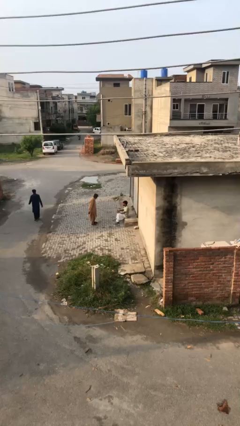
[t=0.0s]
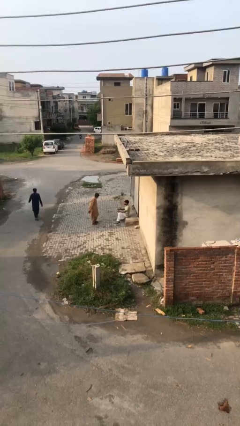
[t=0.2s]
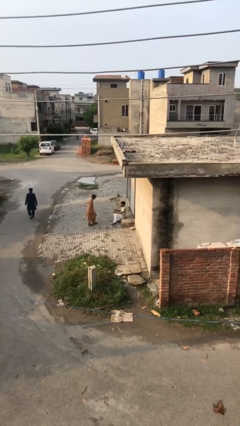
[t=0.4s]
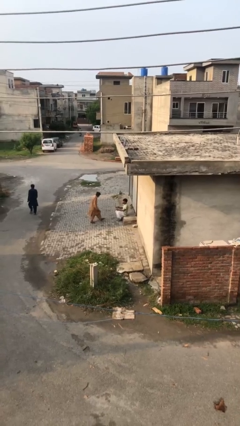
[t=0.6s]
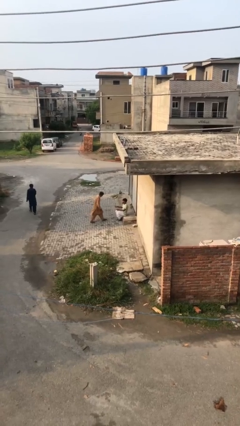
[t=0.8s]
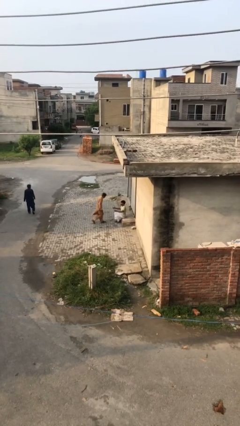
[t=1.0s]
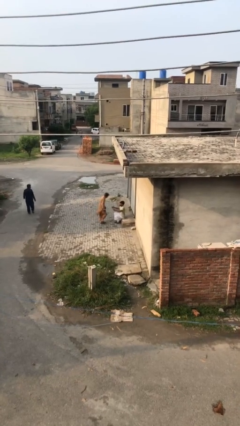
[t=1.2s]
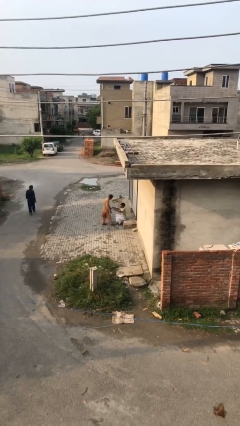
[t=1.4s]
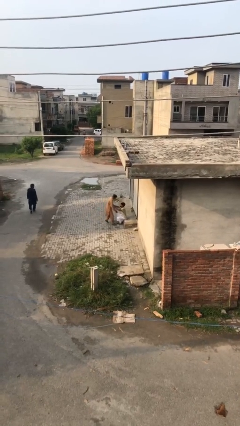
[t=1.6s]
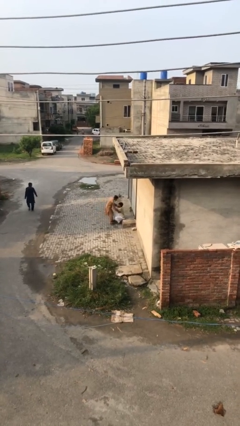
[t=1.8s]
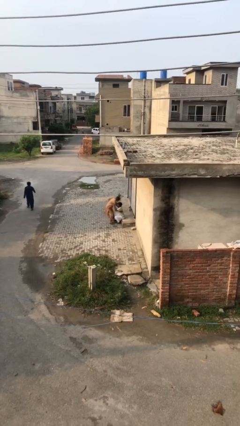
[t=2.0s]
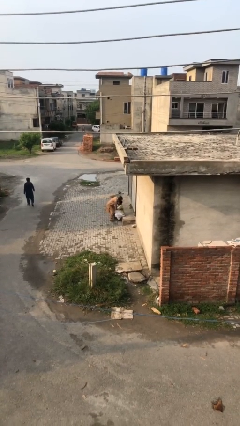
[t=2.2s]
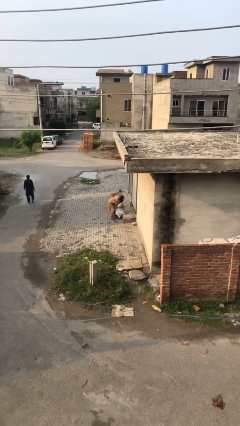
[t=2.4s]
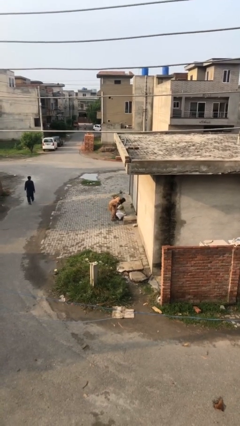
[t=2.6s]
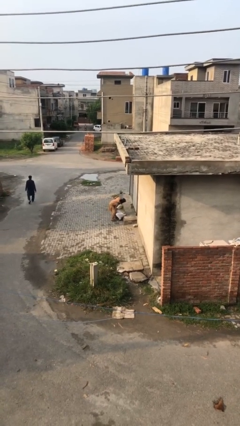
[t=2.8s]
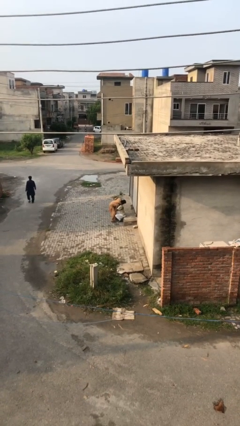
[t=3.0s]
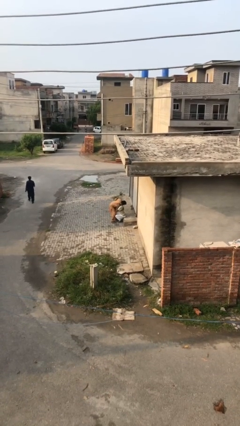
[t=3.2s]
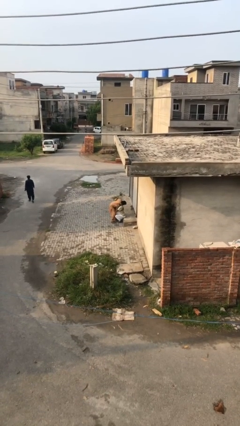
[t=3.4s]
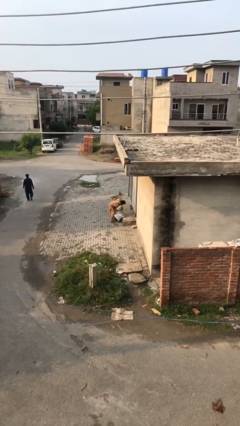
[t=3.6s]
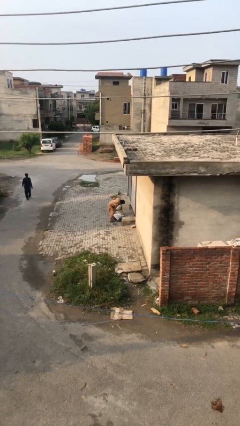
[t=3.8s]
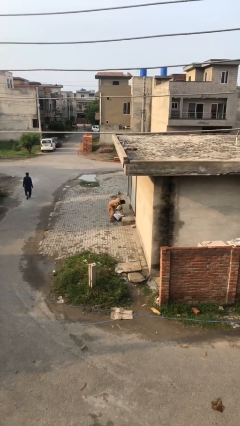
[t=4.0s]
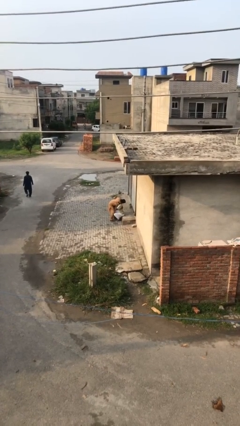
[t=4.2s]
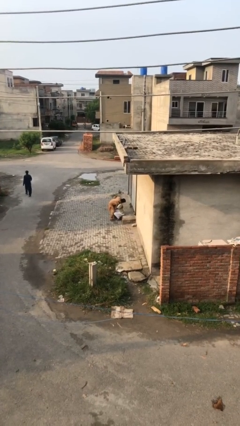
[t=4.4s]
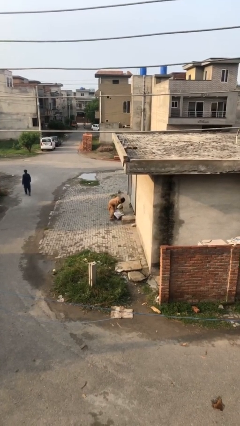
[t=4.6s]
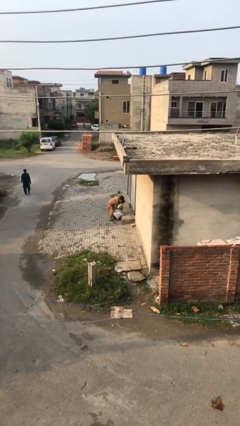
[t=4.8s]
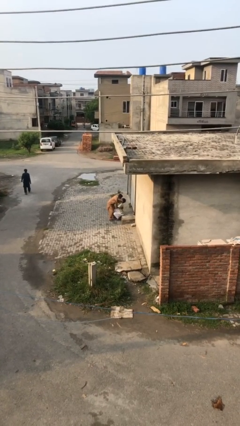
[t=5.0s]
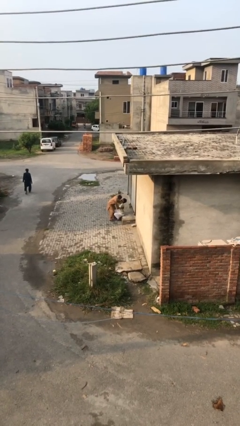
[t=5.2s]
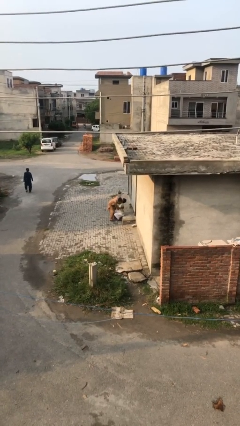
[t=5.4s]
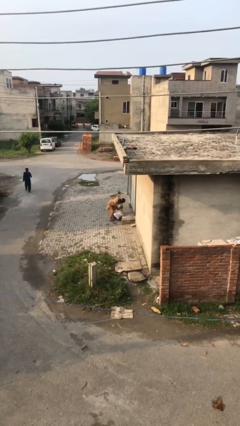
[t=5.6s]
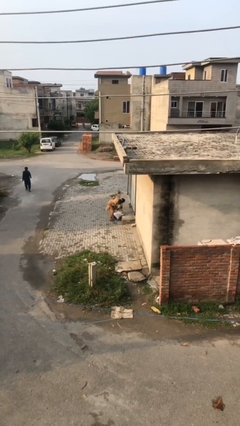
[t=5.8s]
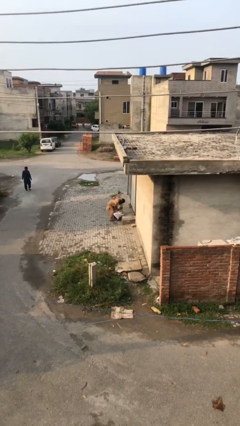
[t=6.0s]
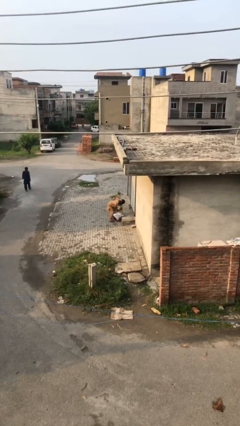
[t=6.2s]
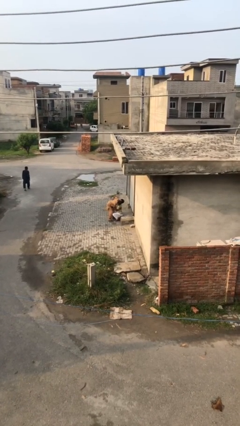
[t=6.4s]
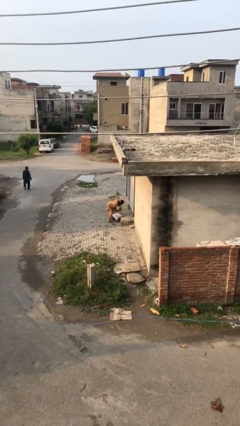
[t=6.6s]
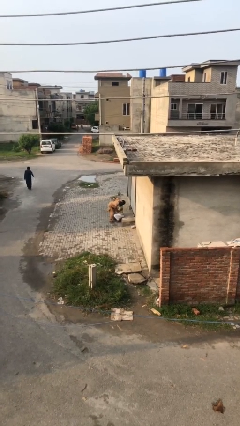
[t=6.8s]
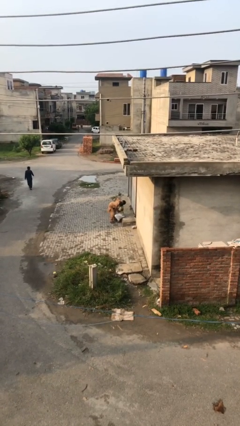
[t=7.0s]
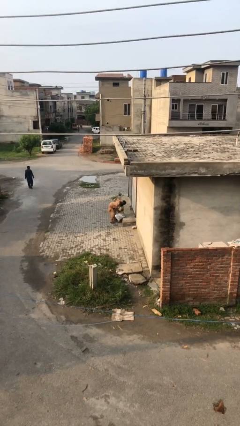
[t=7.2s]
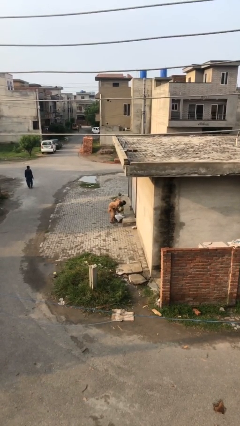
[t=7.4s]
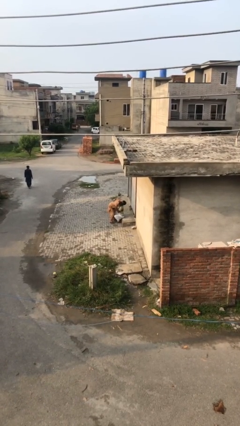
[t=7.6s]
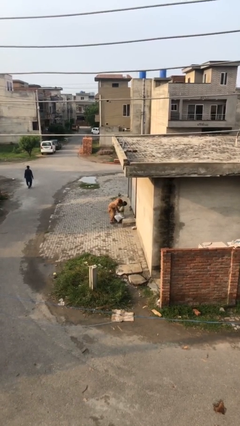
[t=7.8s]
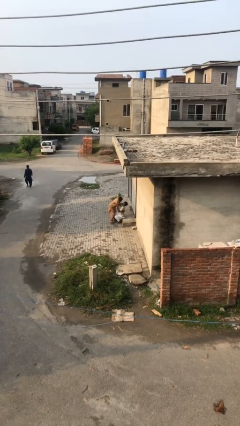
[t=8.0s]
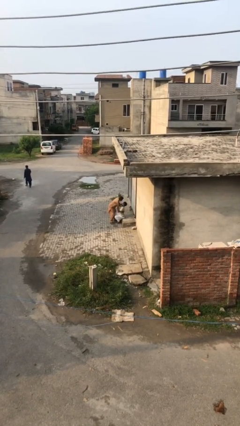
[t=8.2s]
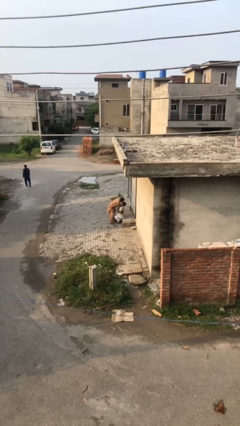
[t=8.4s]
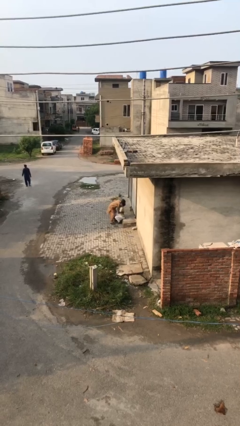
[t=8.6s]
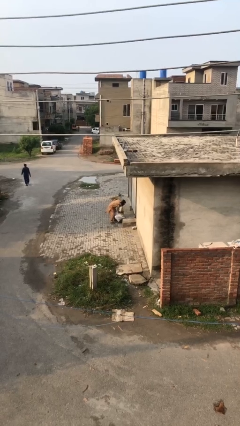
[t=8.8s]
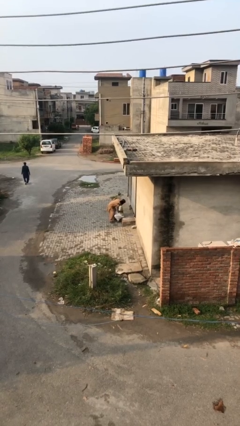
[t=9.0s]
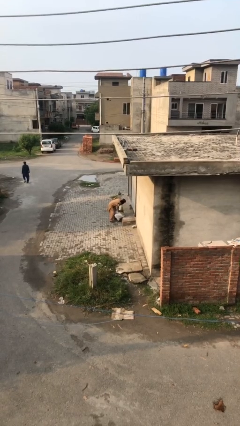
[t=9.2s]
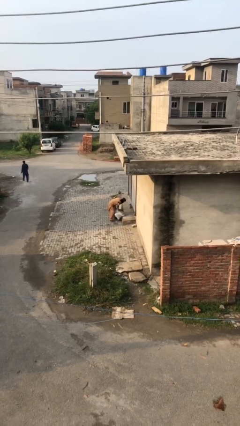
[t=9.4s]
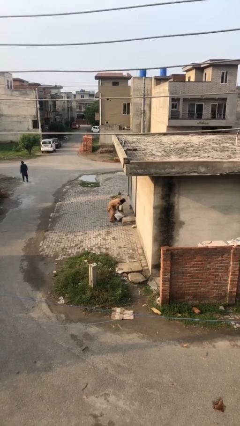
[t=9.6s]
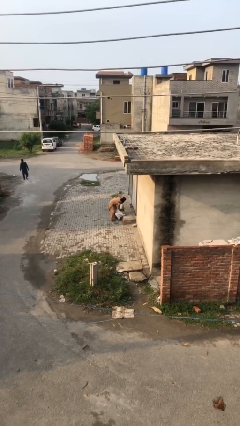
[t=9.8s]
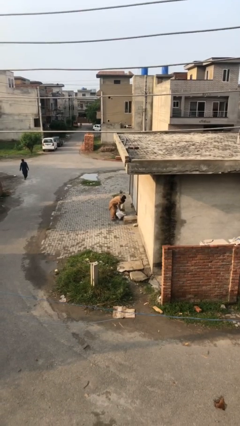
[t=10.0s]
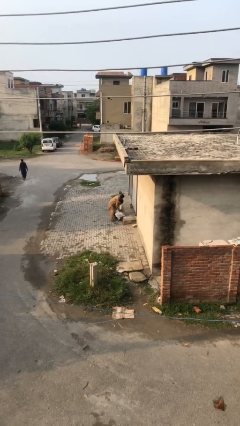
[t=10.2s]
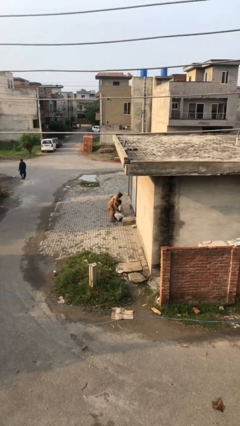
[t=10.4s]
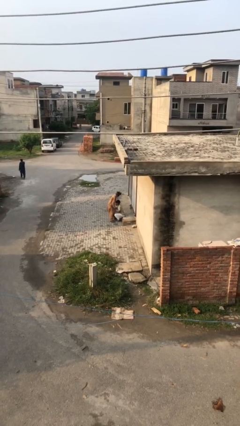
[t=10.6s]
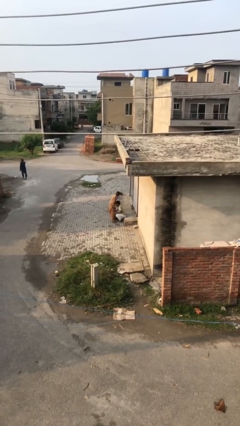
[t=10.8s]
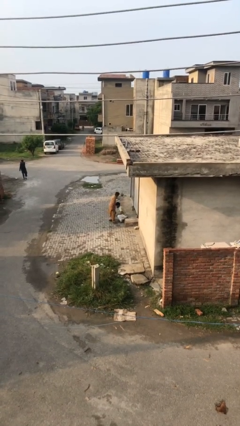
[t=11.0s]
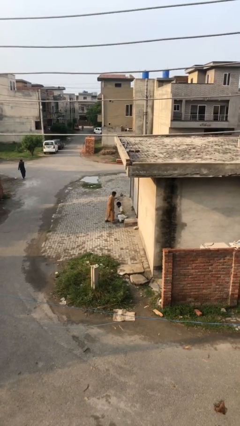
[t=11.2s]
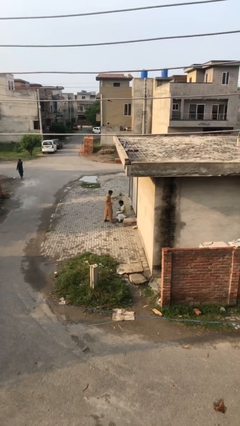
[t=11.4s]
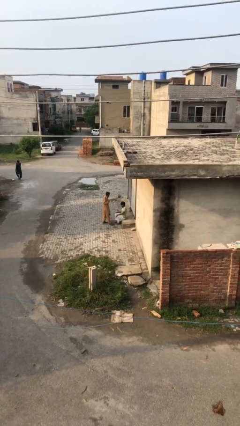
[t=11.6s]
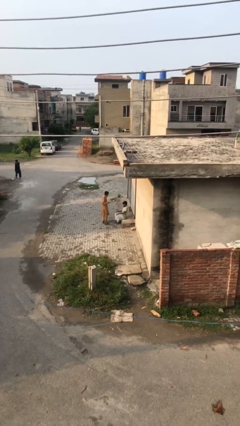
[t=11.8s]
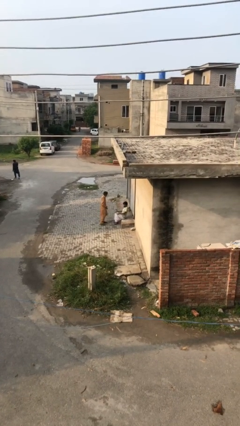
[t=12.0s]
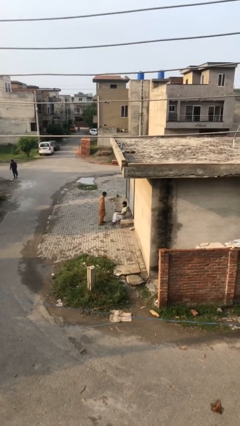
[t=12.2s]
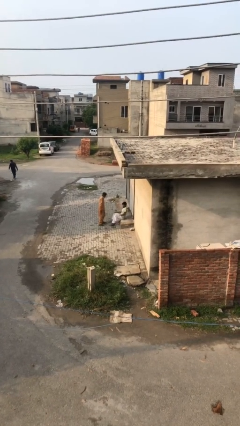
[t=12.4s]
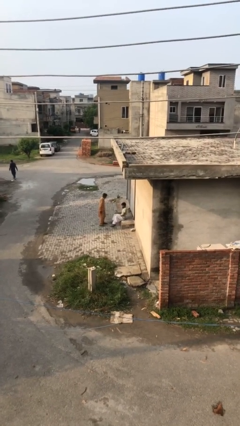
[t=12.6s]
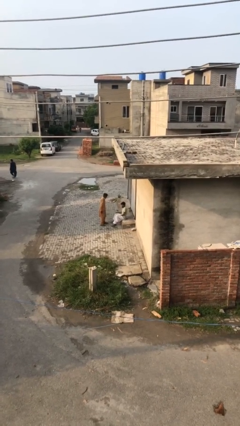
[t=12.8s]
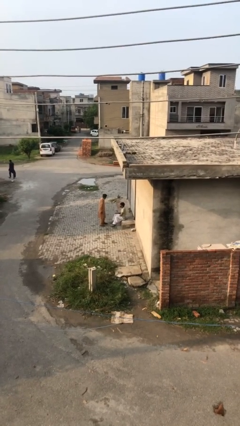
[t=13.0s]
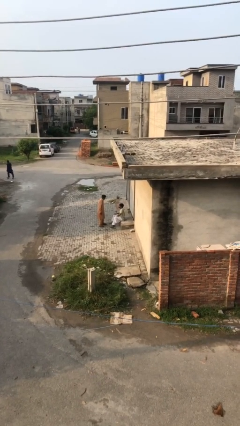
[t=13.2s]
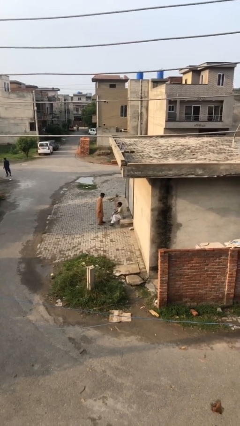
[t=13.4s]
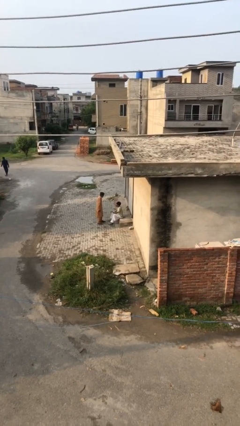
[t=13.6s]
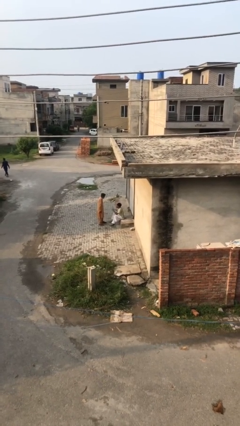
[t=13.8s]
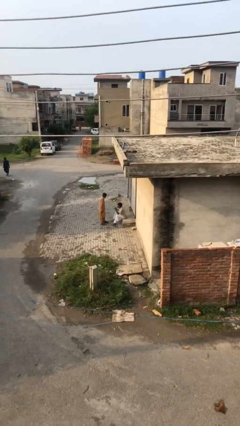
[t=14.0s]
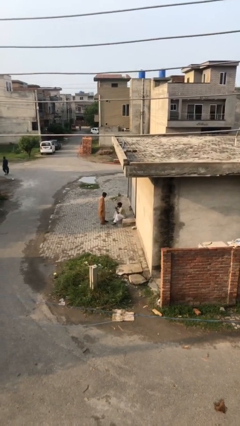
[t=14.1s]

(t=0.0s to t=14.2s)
person embraces person

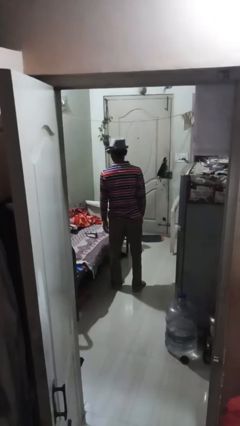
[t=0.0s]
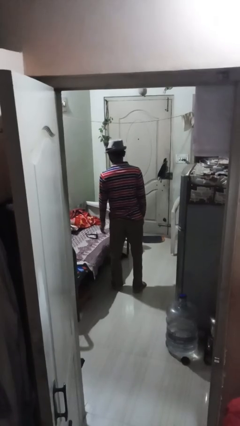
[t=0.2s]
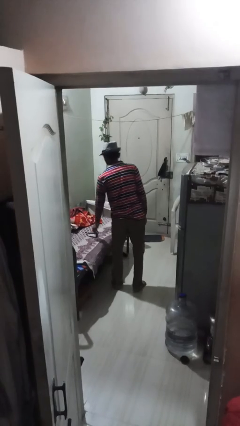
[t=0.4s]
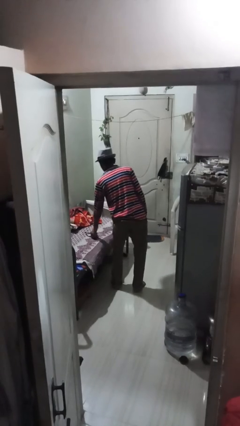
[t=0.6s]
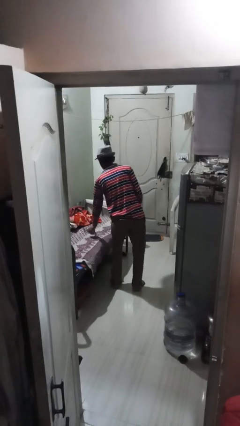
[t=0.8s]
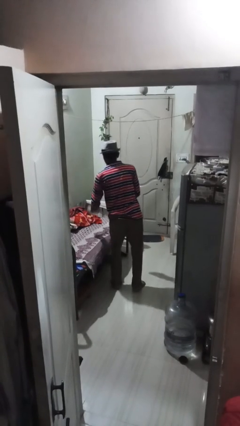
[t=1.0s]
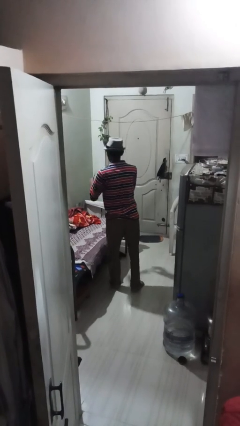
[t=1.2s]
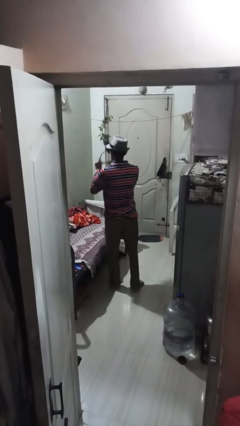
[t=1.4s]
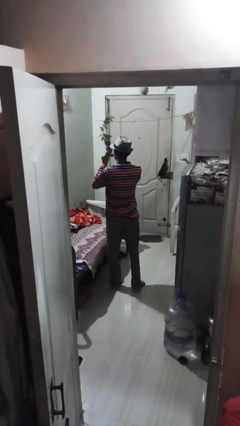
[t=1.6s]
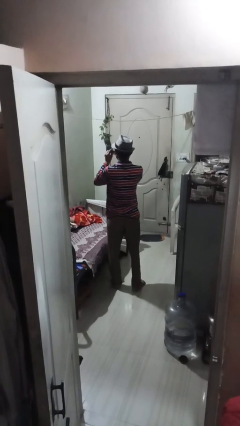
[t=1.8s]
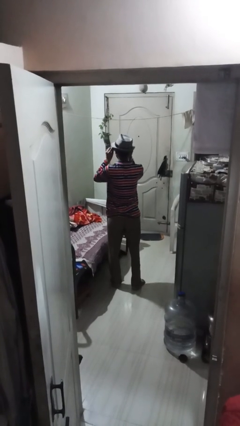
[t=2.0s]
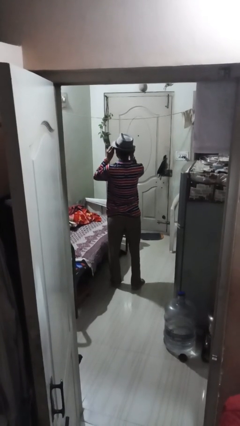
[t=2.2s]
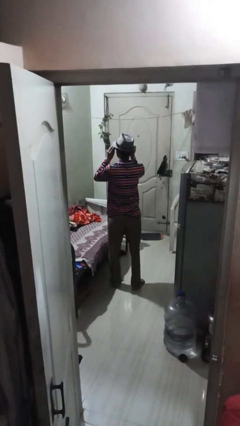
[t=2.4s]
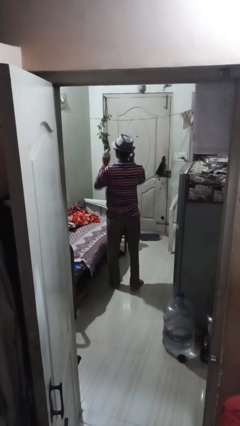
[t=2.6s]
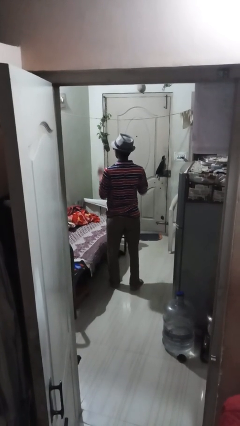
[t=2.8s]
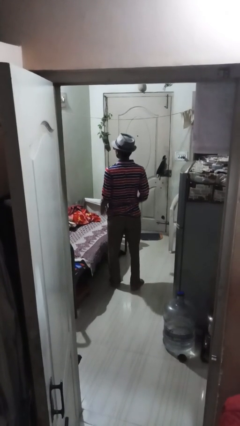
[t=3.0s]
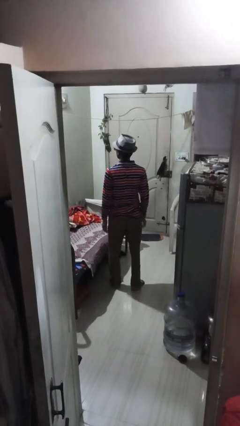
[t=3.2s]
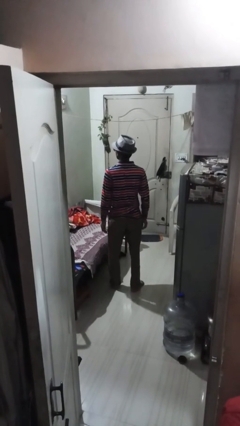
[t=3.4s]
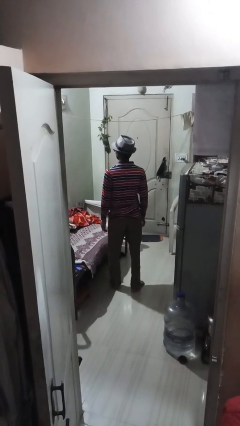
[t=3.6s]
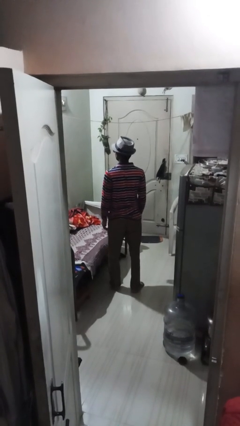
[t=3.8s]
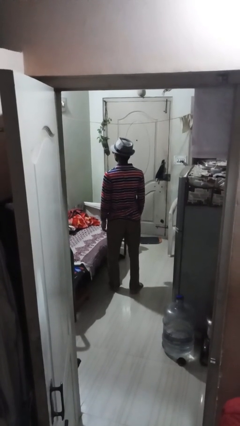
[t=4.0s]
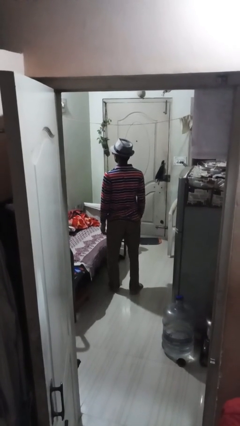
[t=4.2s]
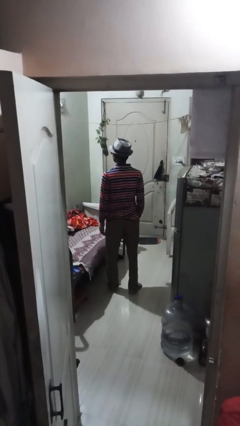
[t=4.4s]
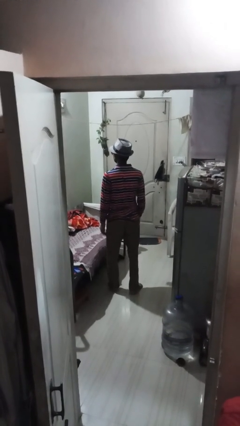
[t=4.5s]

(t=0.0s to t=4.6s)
person puts on sunglasses
